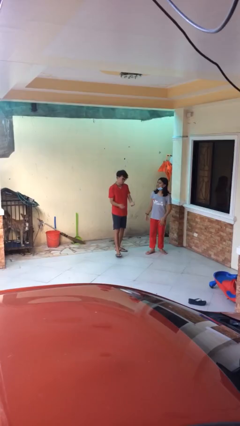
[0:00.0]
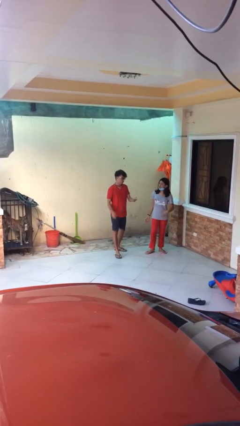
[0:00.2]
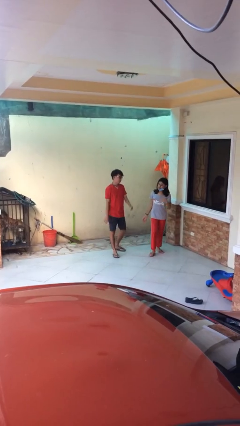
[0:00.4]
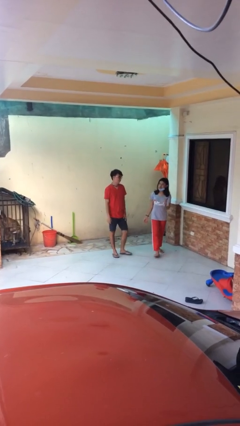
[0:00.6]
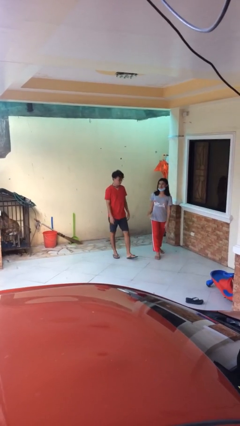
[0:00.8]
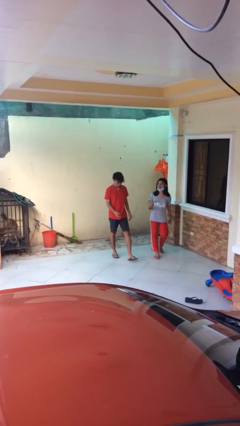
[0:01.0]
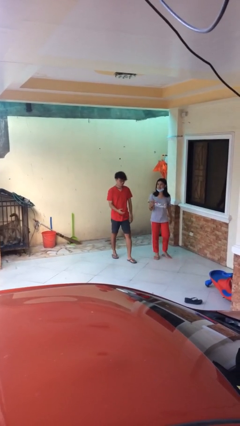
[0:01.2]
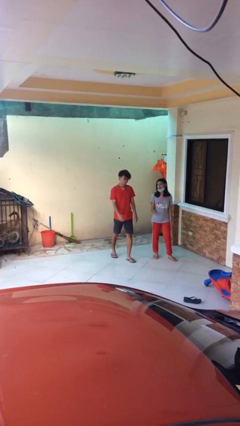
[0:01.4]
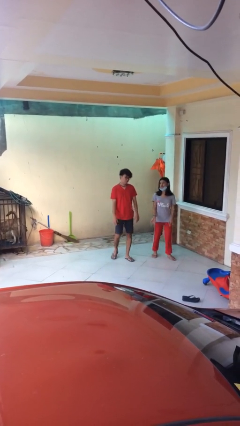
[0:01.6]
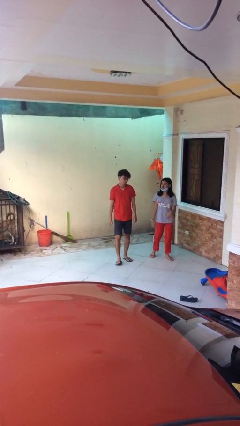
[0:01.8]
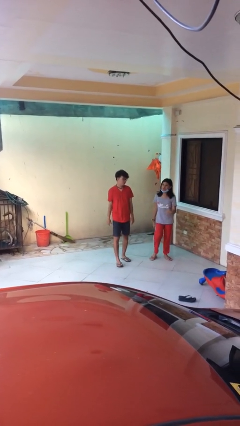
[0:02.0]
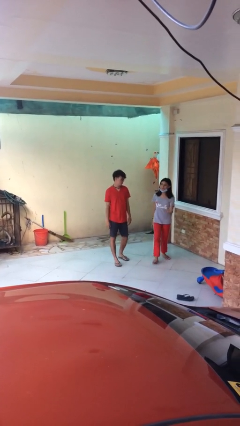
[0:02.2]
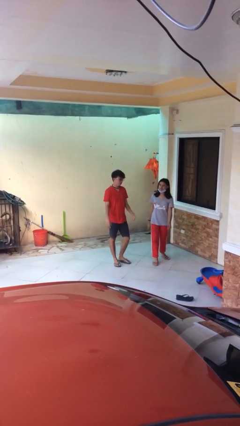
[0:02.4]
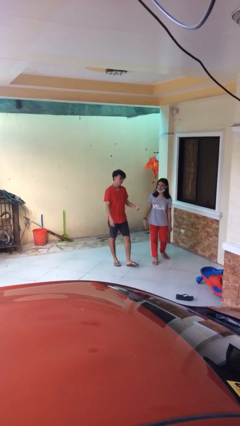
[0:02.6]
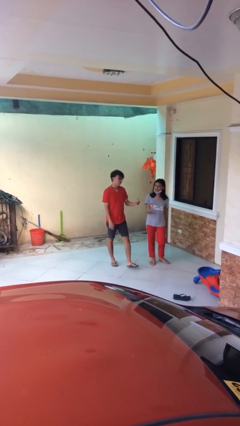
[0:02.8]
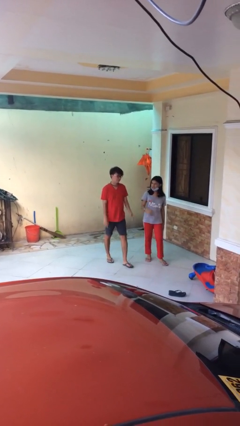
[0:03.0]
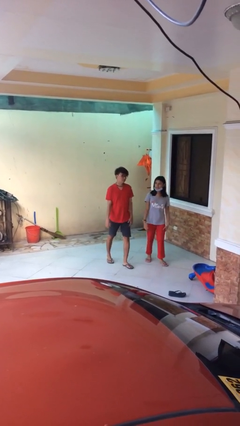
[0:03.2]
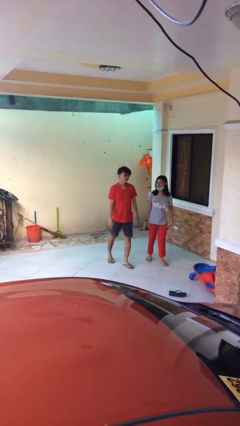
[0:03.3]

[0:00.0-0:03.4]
person talks to person

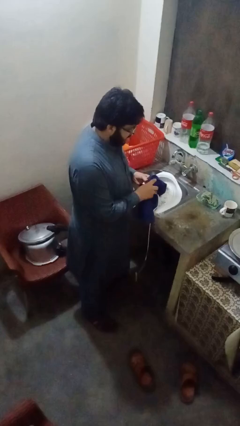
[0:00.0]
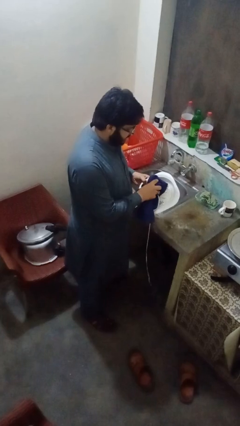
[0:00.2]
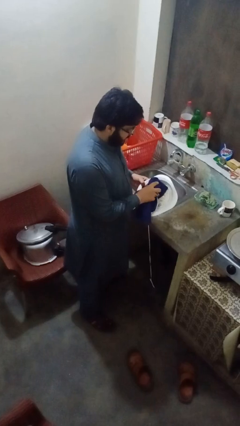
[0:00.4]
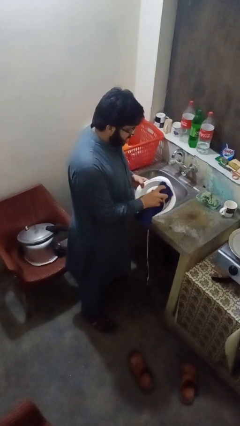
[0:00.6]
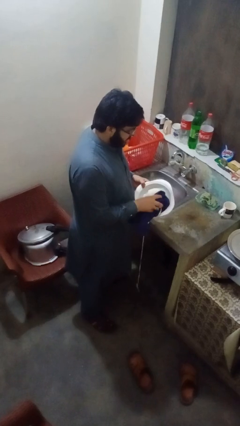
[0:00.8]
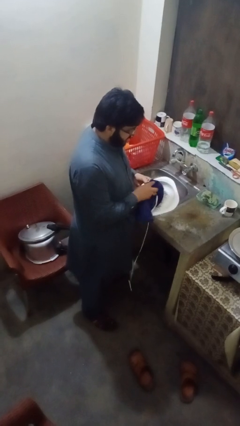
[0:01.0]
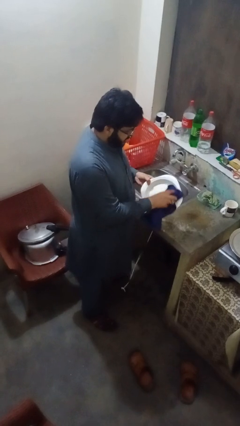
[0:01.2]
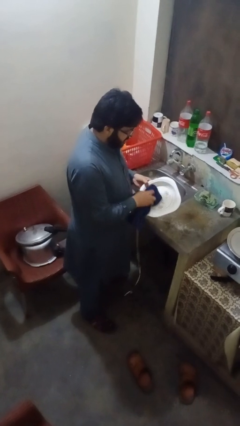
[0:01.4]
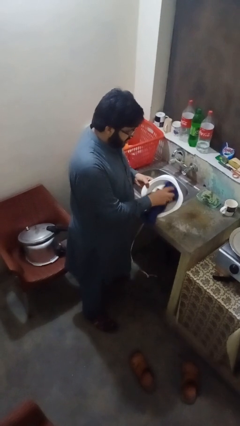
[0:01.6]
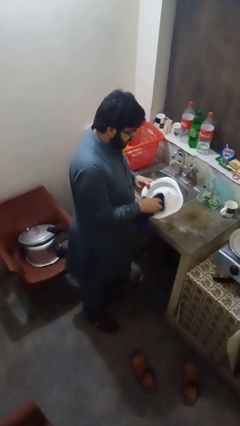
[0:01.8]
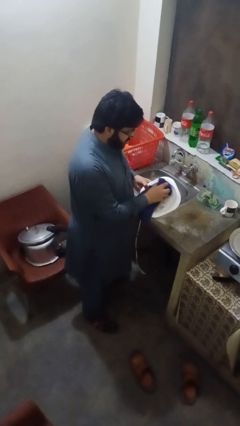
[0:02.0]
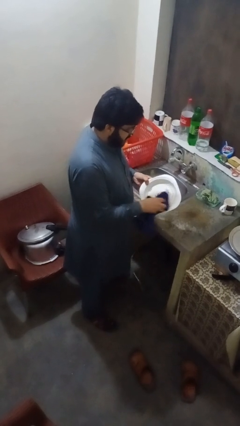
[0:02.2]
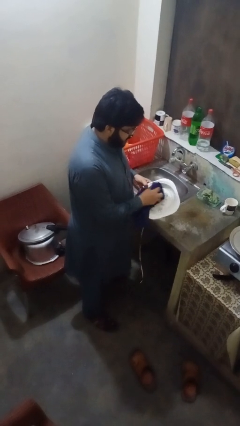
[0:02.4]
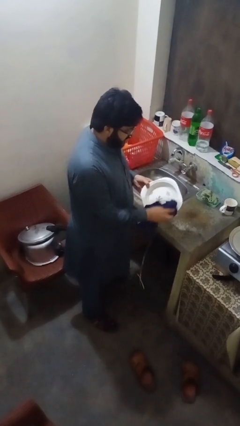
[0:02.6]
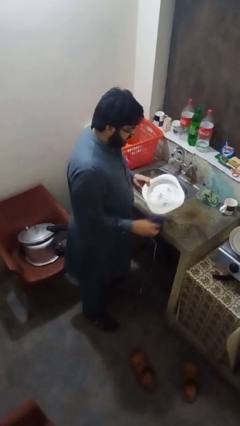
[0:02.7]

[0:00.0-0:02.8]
person dries dish

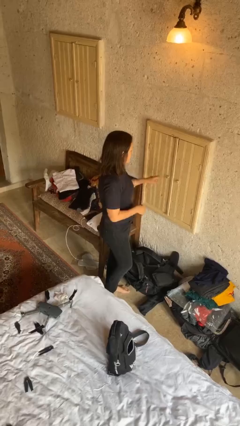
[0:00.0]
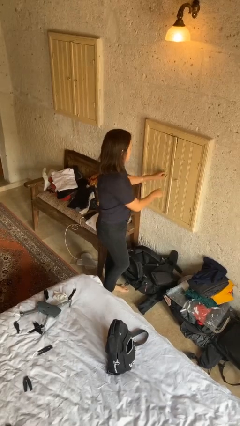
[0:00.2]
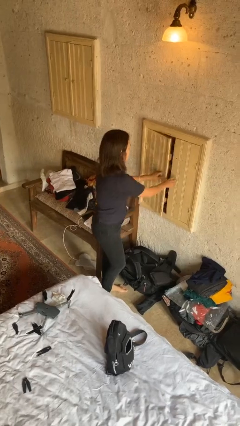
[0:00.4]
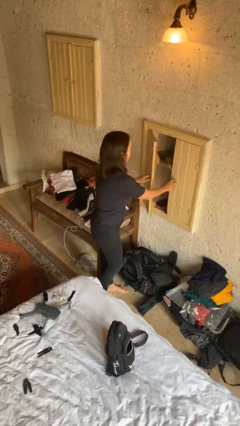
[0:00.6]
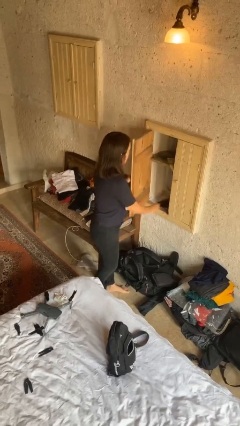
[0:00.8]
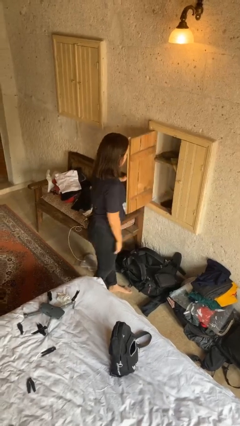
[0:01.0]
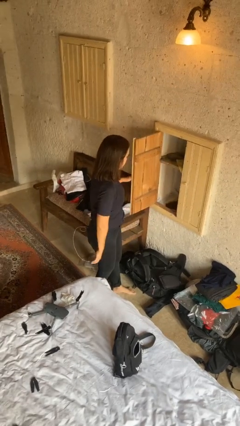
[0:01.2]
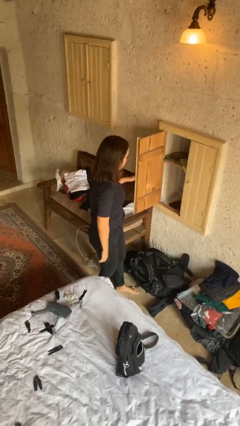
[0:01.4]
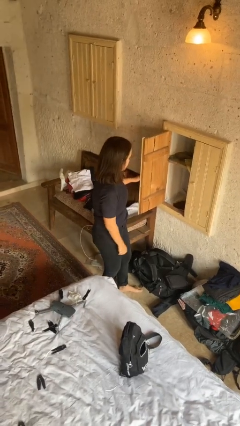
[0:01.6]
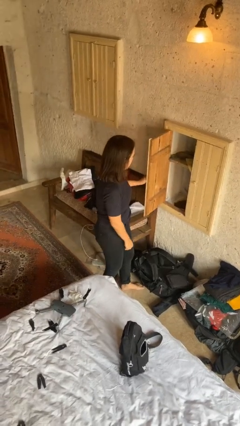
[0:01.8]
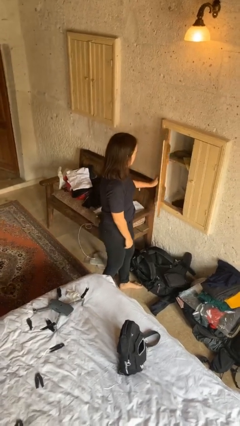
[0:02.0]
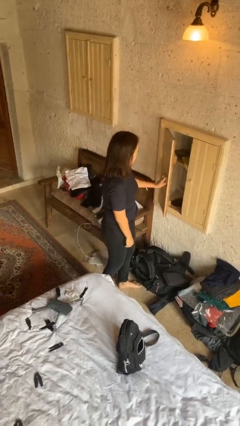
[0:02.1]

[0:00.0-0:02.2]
person opens closet door

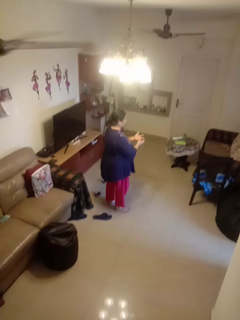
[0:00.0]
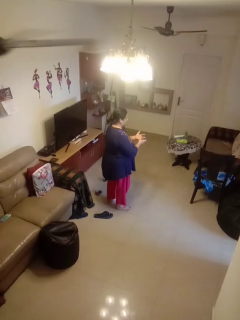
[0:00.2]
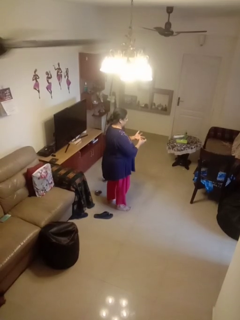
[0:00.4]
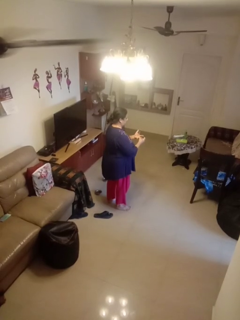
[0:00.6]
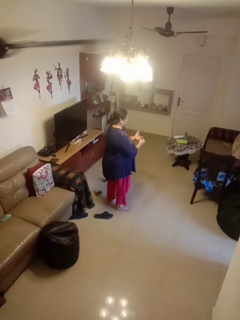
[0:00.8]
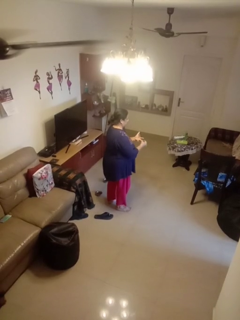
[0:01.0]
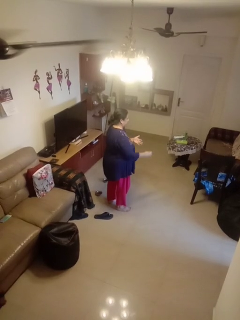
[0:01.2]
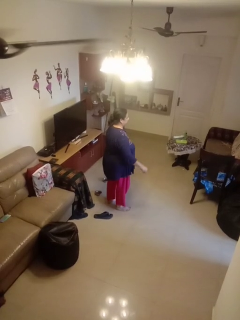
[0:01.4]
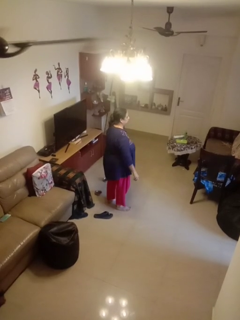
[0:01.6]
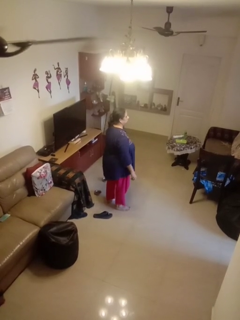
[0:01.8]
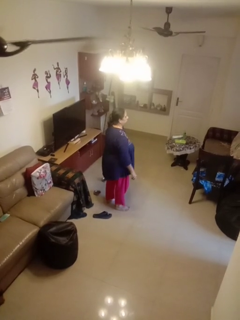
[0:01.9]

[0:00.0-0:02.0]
person takes off ring

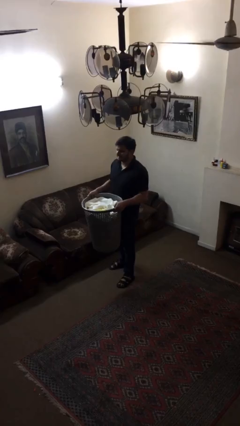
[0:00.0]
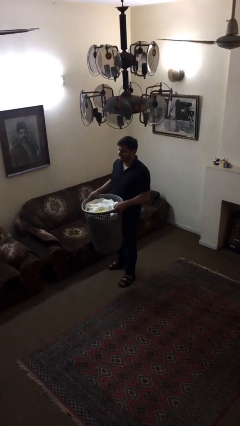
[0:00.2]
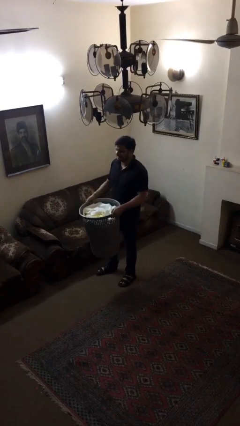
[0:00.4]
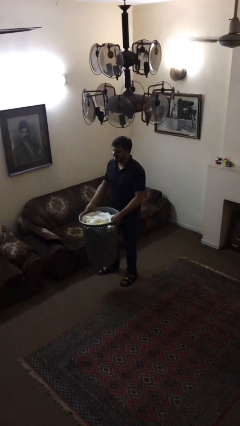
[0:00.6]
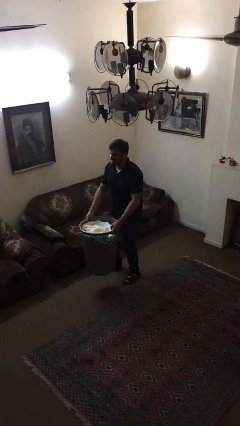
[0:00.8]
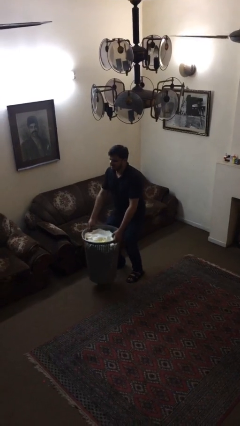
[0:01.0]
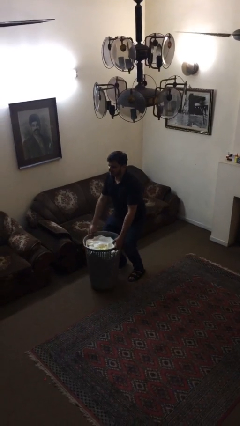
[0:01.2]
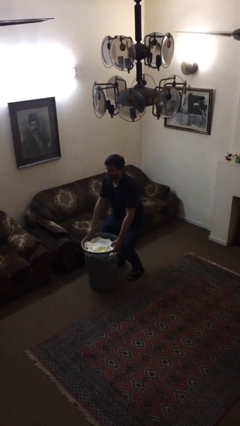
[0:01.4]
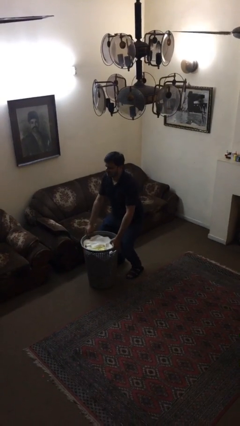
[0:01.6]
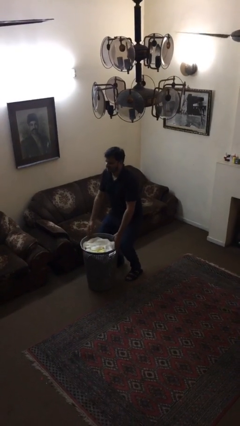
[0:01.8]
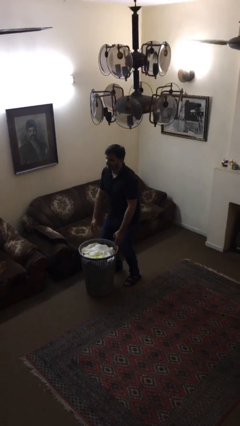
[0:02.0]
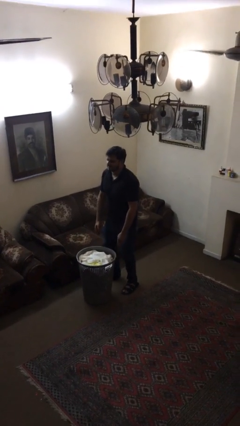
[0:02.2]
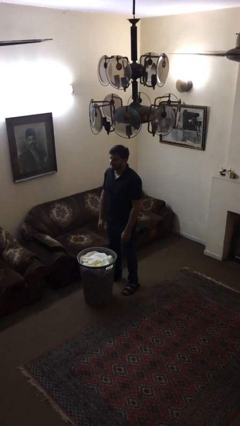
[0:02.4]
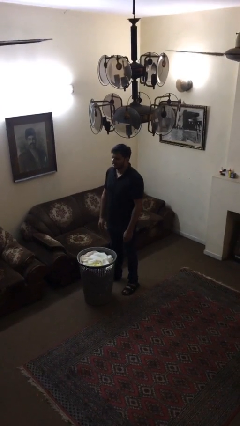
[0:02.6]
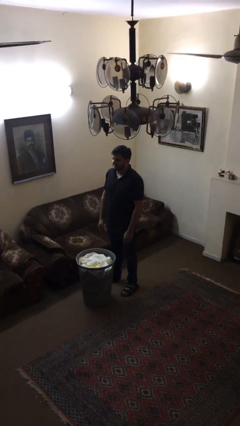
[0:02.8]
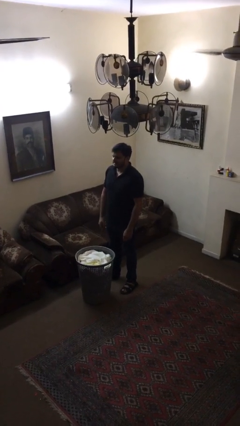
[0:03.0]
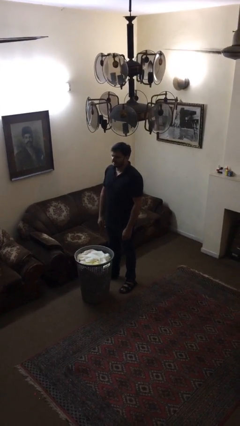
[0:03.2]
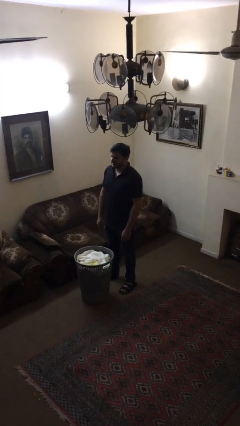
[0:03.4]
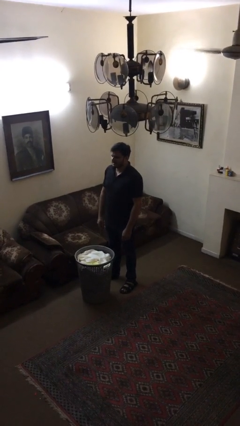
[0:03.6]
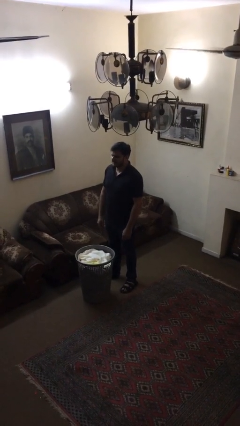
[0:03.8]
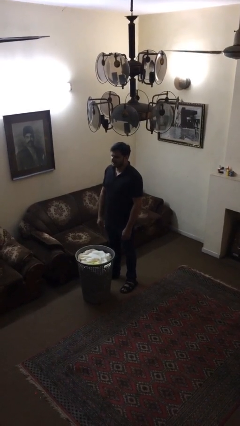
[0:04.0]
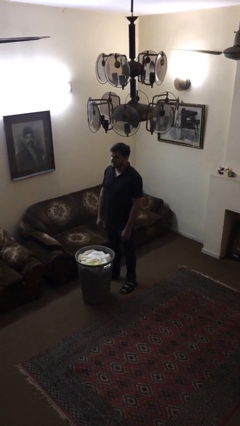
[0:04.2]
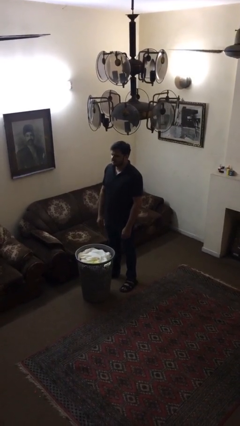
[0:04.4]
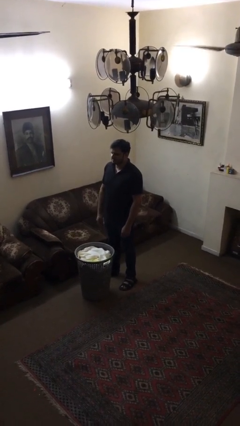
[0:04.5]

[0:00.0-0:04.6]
person puts down object on floor

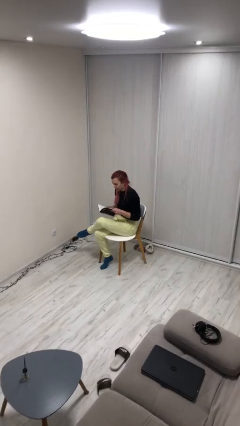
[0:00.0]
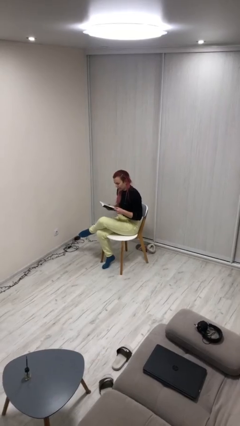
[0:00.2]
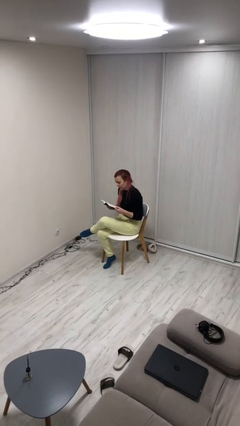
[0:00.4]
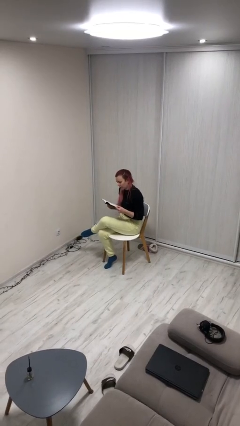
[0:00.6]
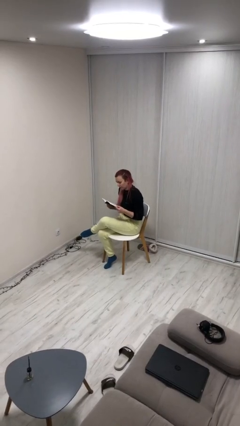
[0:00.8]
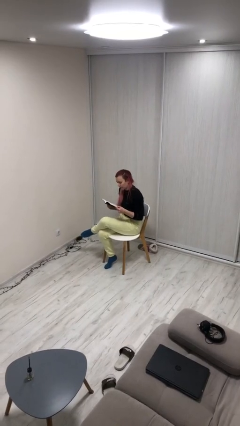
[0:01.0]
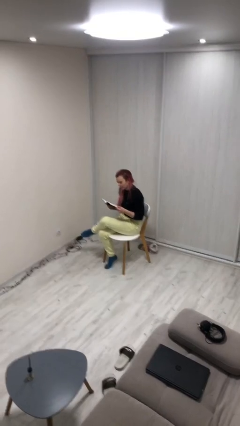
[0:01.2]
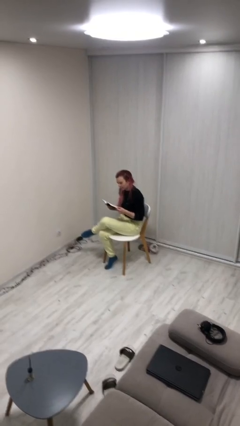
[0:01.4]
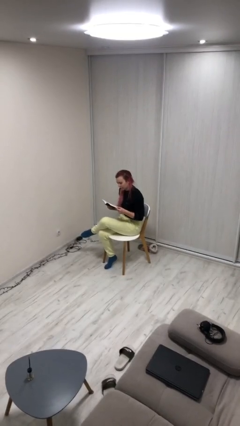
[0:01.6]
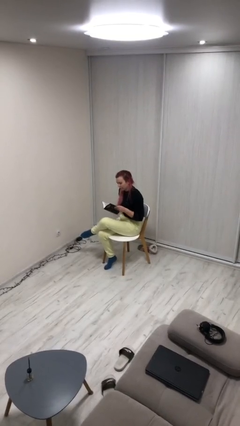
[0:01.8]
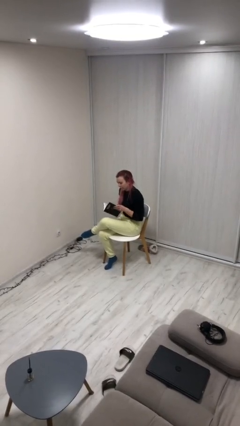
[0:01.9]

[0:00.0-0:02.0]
person reads document

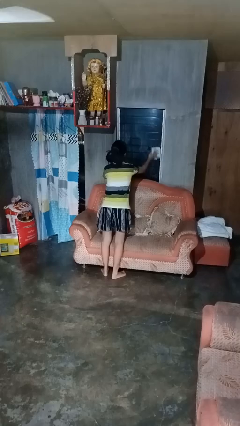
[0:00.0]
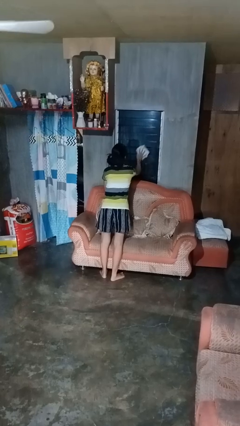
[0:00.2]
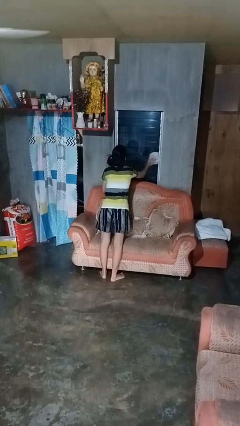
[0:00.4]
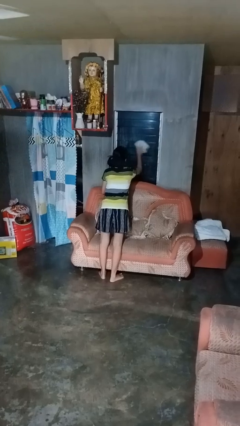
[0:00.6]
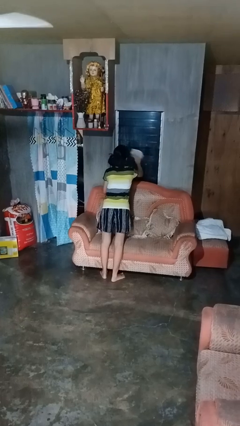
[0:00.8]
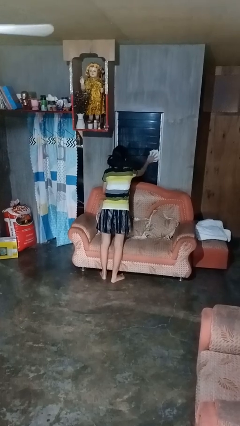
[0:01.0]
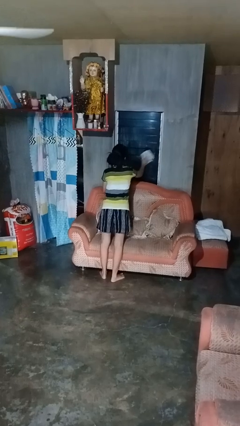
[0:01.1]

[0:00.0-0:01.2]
person washes window
